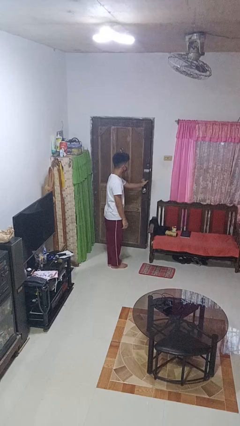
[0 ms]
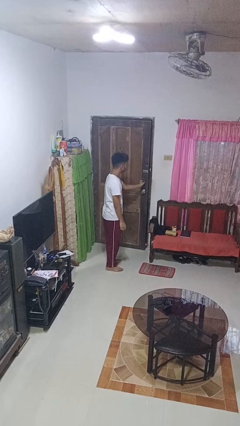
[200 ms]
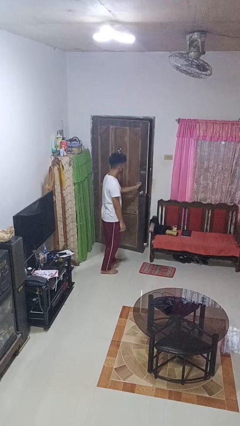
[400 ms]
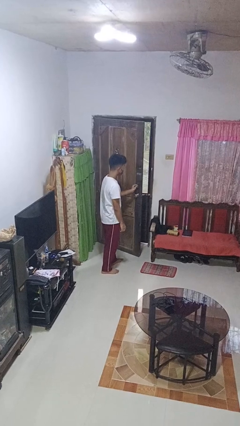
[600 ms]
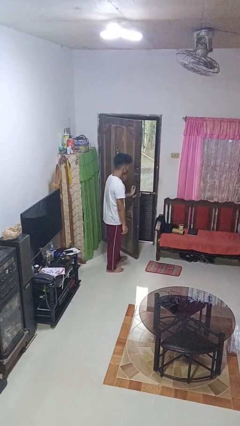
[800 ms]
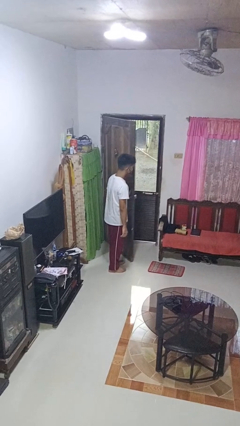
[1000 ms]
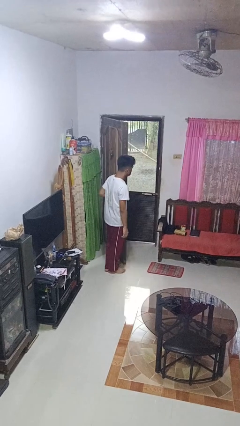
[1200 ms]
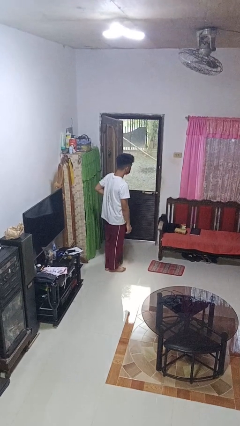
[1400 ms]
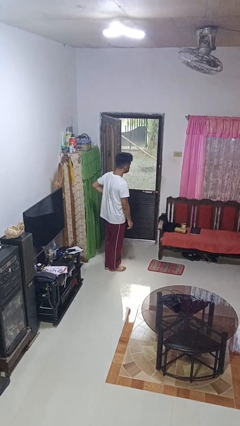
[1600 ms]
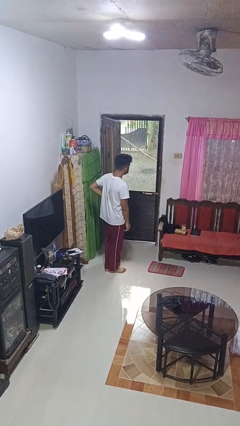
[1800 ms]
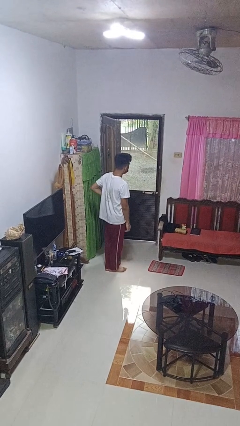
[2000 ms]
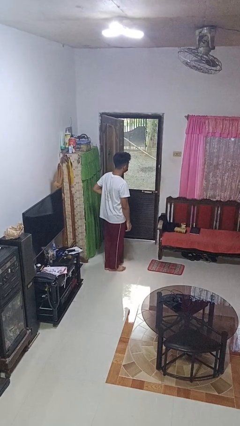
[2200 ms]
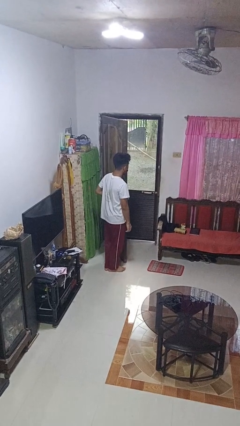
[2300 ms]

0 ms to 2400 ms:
person opens facility door

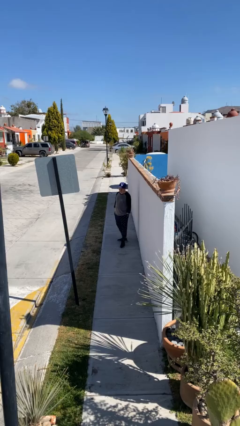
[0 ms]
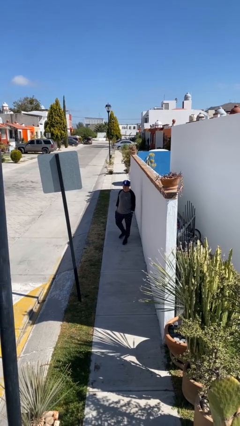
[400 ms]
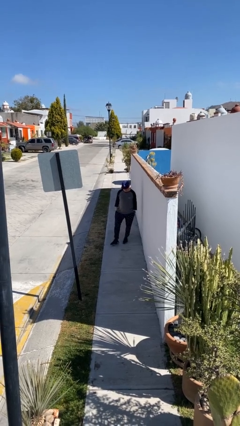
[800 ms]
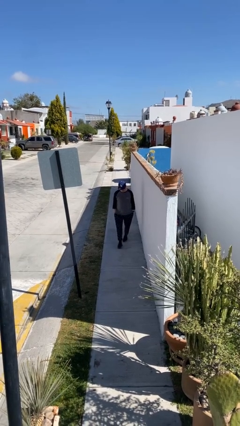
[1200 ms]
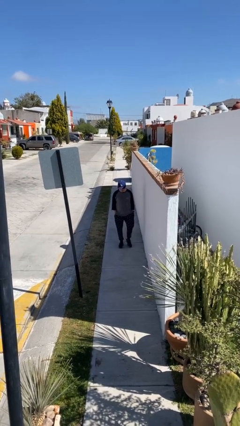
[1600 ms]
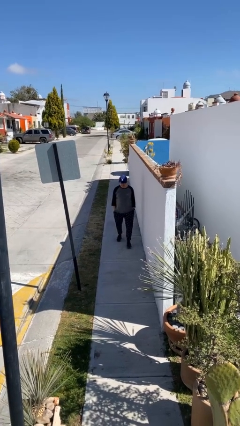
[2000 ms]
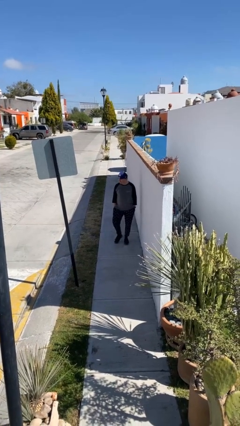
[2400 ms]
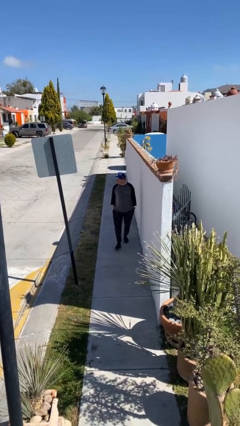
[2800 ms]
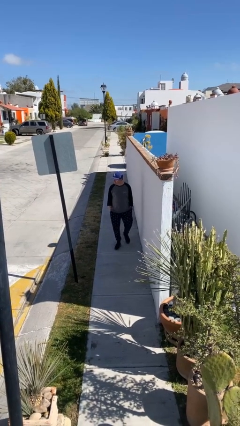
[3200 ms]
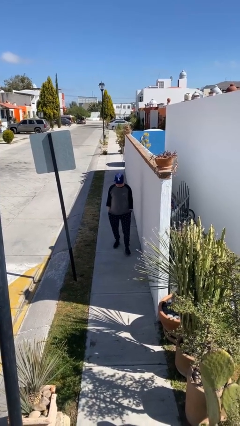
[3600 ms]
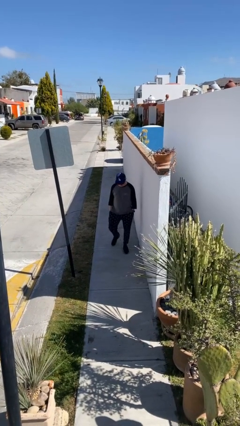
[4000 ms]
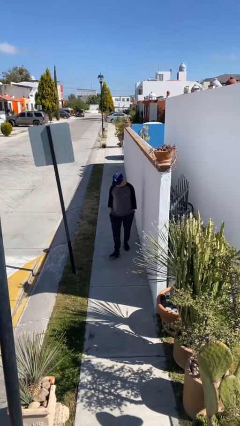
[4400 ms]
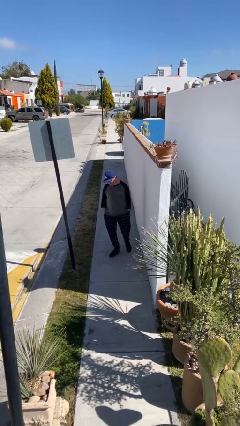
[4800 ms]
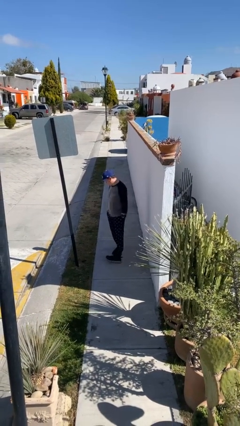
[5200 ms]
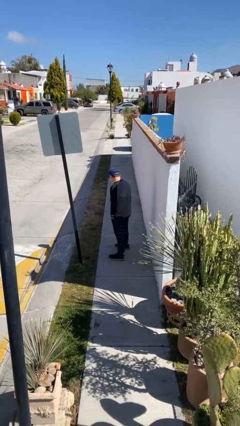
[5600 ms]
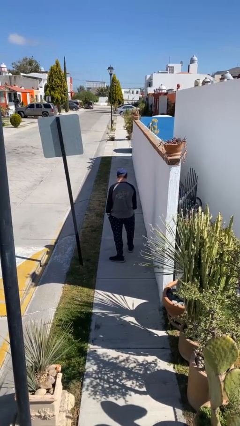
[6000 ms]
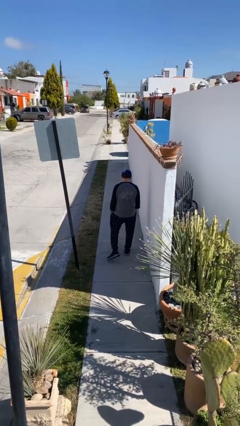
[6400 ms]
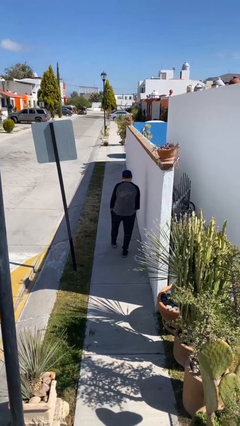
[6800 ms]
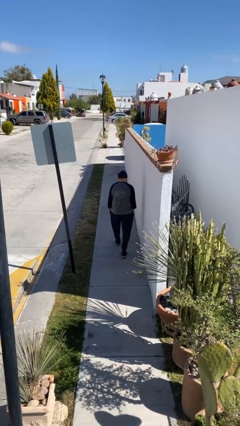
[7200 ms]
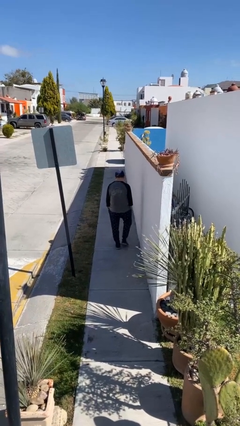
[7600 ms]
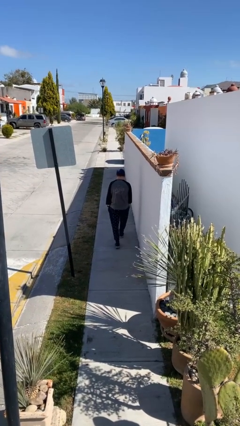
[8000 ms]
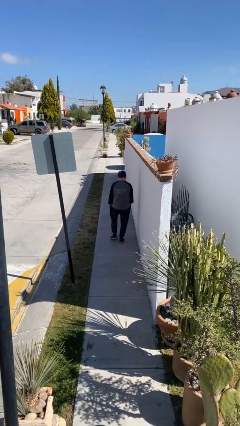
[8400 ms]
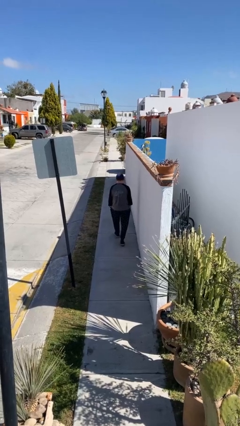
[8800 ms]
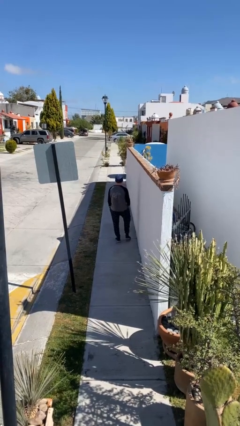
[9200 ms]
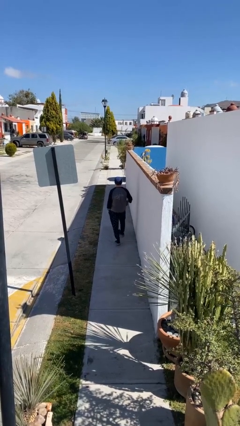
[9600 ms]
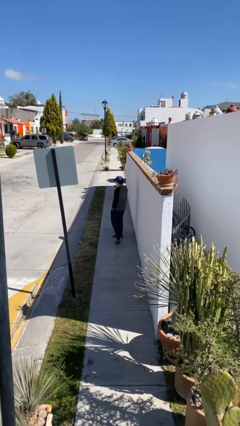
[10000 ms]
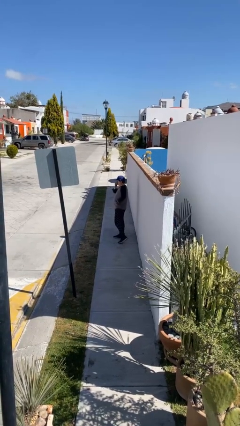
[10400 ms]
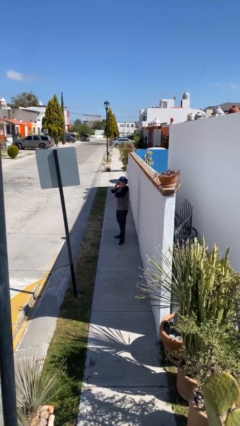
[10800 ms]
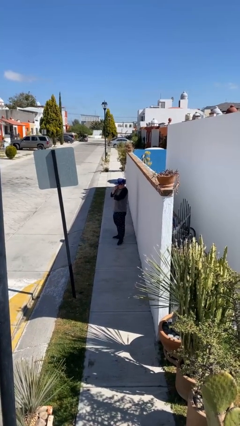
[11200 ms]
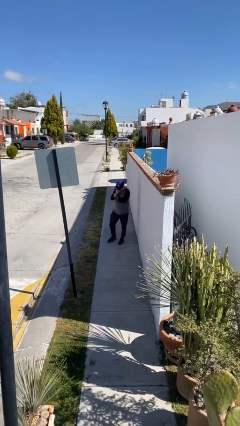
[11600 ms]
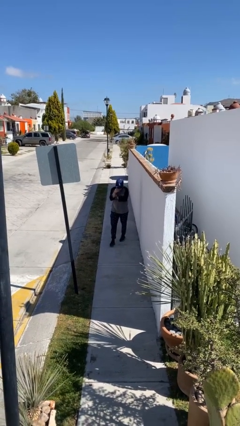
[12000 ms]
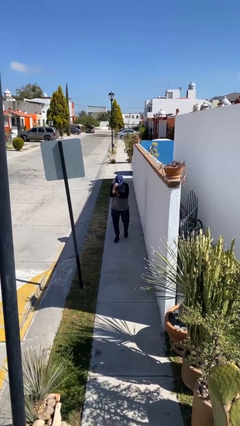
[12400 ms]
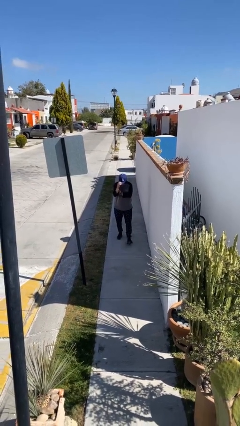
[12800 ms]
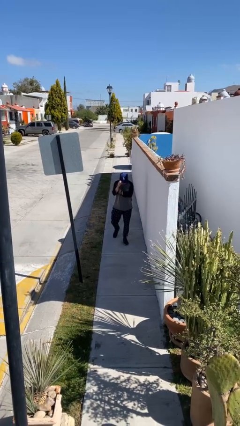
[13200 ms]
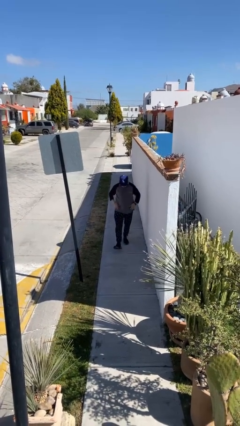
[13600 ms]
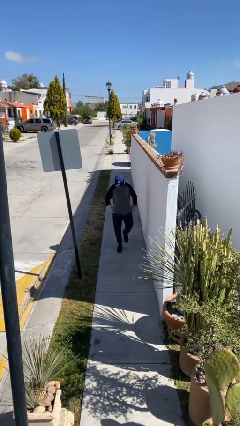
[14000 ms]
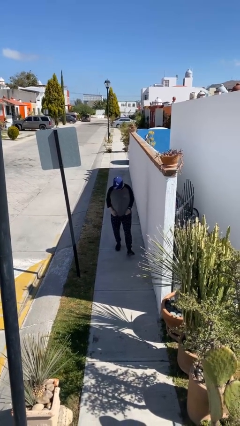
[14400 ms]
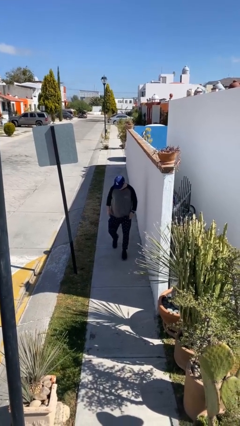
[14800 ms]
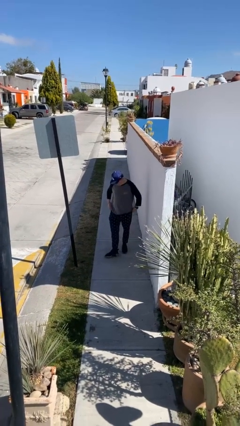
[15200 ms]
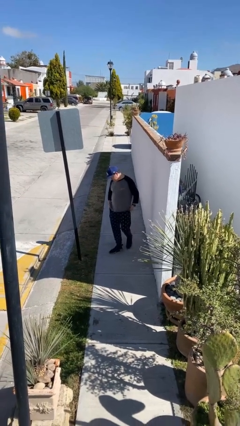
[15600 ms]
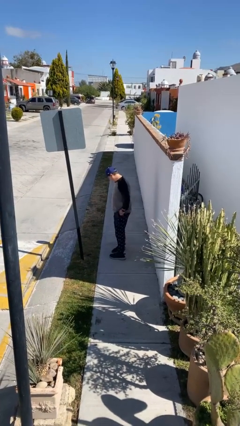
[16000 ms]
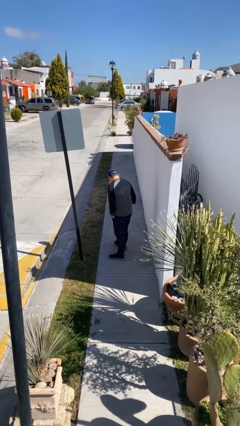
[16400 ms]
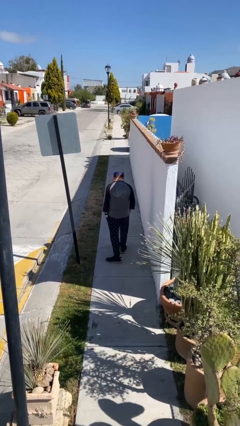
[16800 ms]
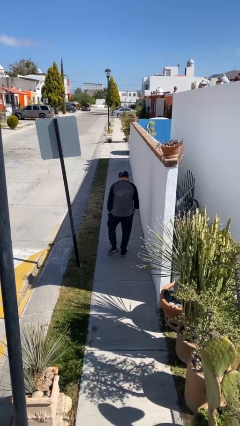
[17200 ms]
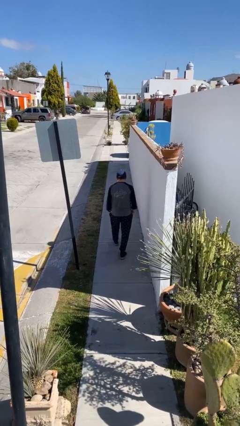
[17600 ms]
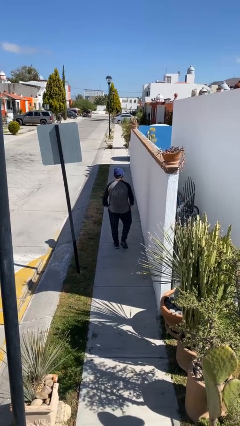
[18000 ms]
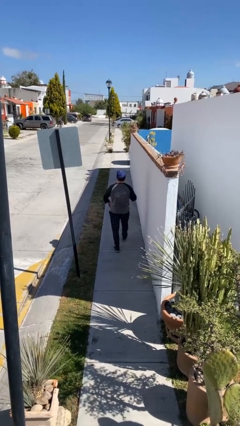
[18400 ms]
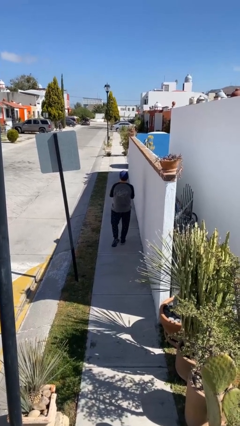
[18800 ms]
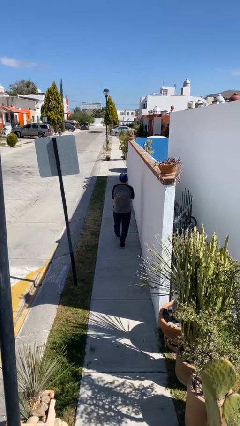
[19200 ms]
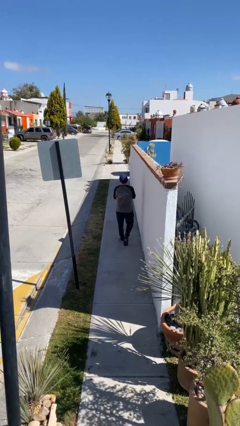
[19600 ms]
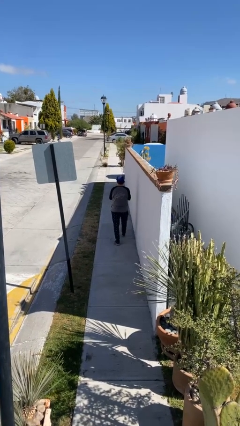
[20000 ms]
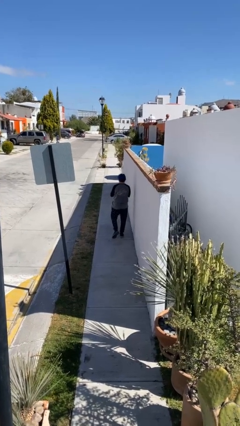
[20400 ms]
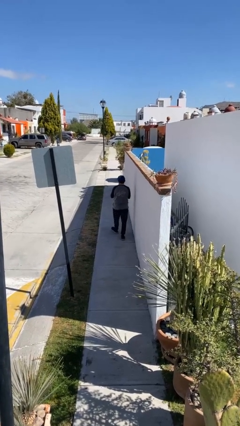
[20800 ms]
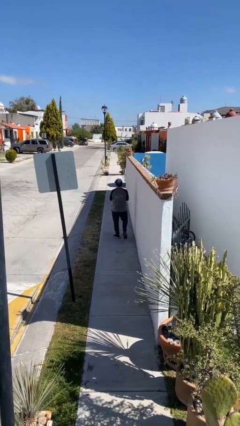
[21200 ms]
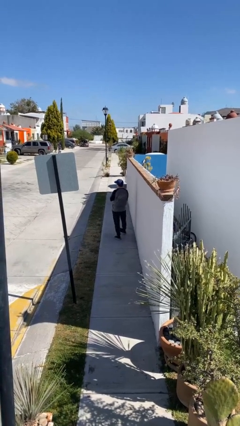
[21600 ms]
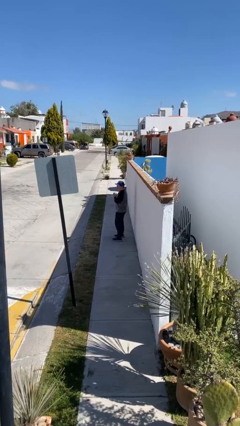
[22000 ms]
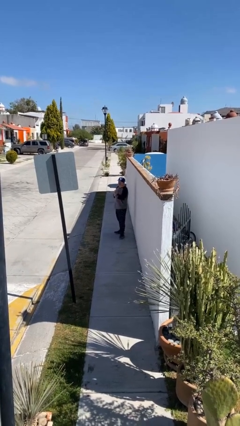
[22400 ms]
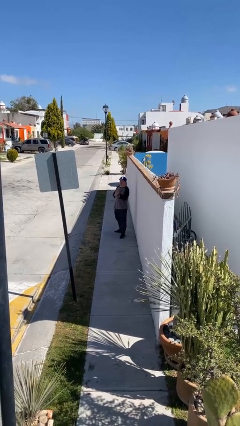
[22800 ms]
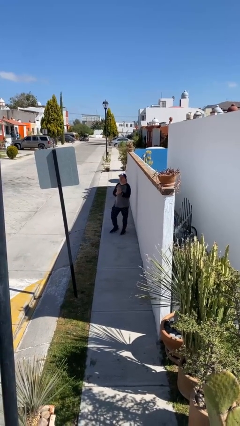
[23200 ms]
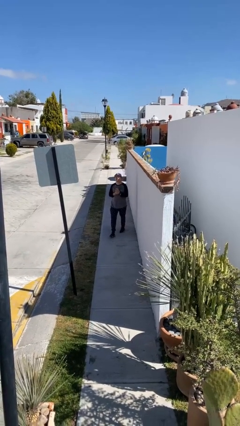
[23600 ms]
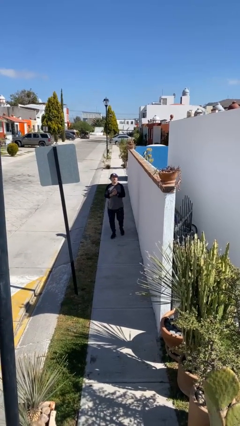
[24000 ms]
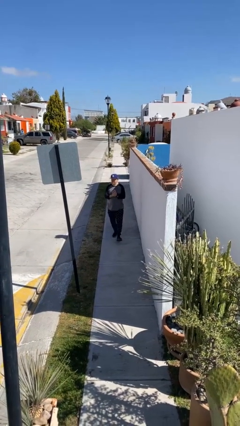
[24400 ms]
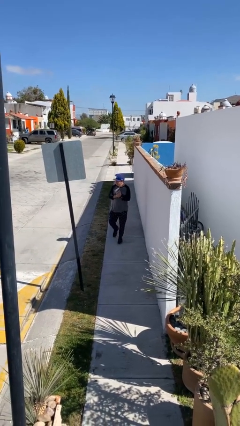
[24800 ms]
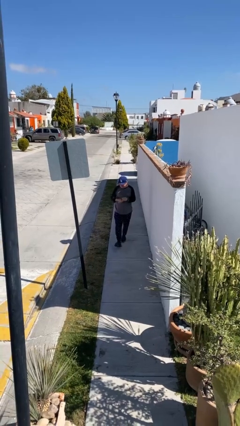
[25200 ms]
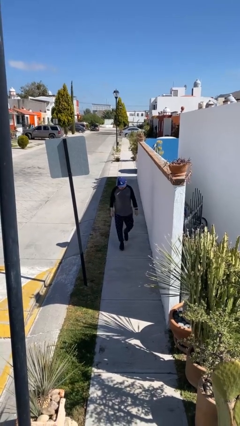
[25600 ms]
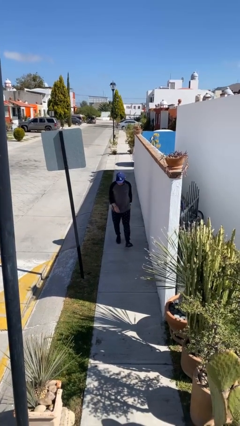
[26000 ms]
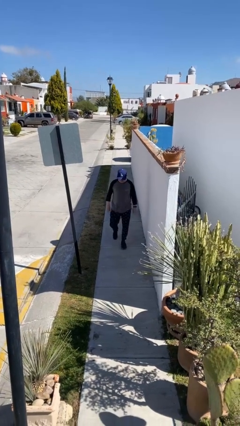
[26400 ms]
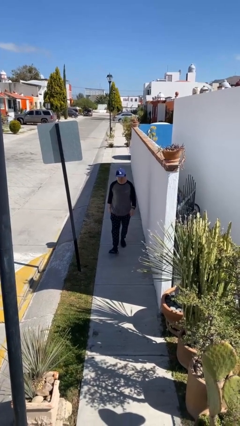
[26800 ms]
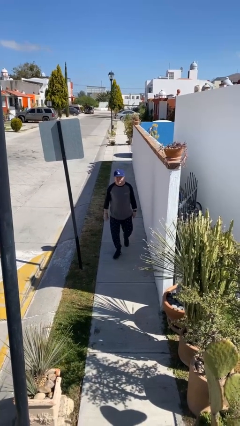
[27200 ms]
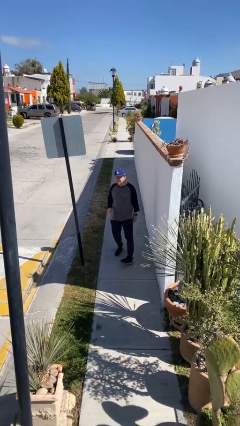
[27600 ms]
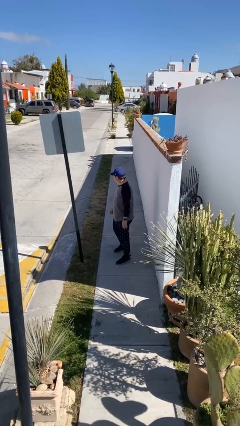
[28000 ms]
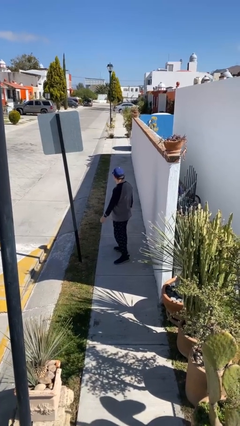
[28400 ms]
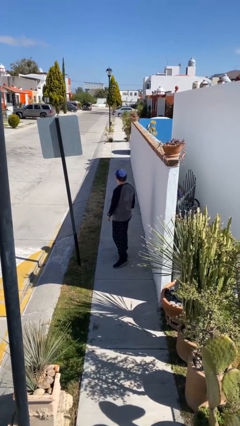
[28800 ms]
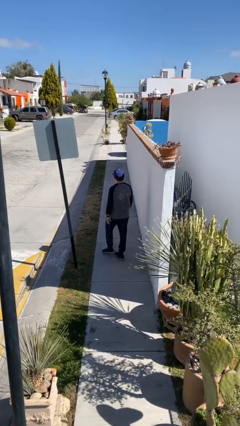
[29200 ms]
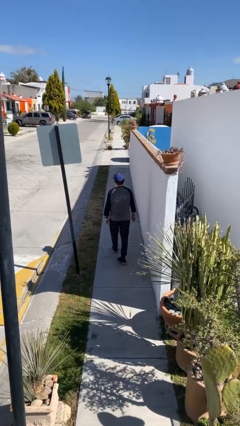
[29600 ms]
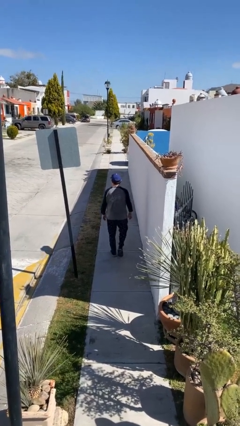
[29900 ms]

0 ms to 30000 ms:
person walks

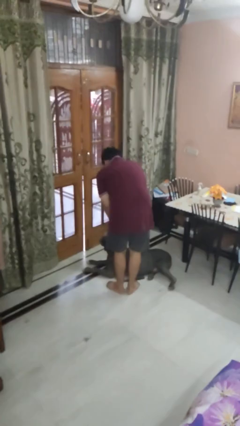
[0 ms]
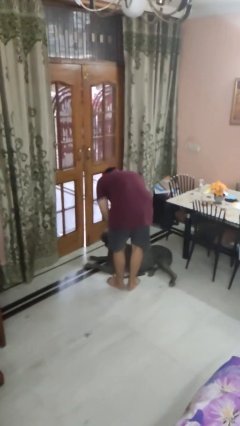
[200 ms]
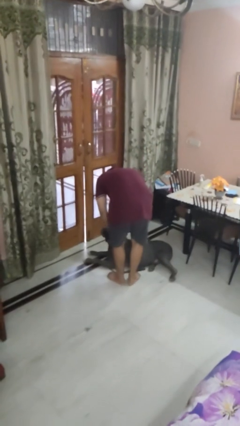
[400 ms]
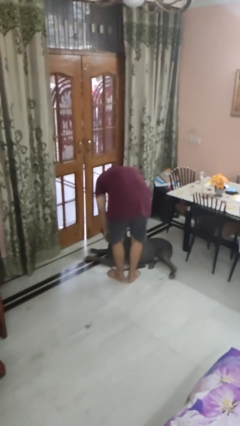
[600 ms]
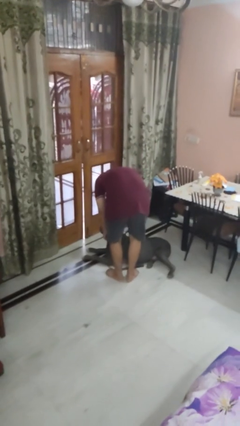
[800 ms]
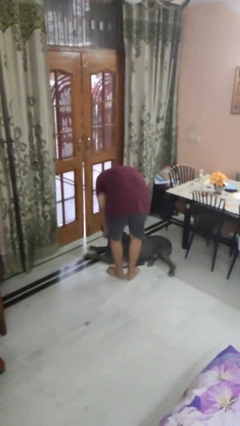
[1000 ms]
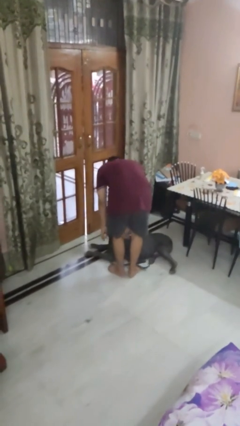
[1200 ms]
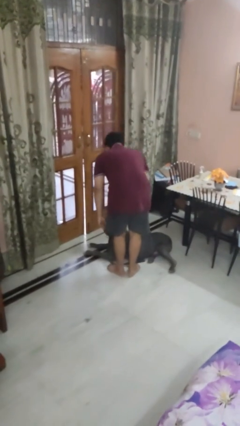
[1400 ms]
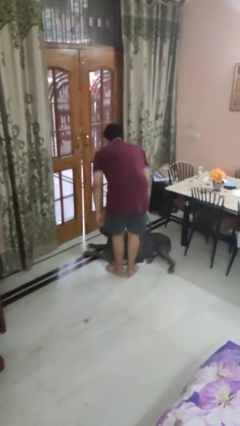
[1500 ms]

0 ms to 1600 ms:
person unattaches leash from dog
